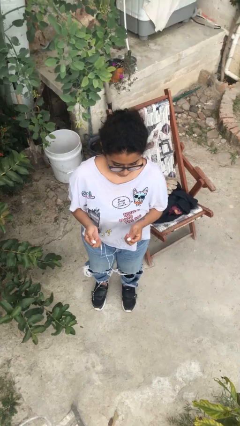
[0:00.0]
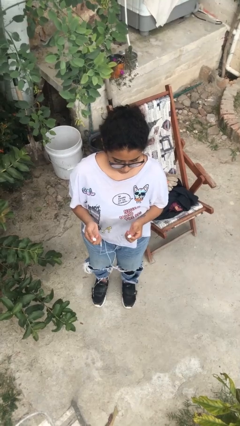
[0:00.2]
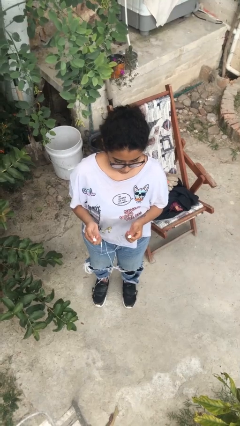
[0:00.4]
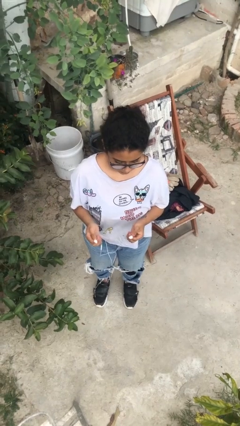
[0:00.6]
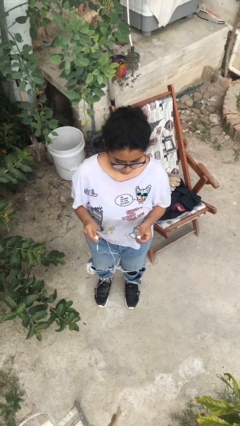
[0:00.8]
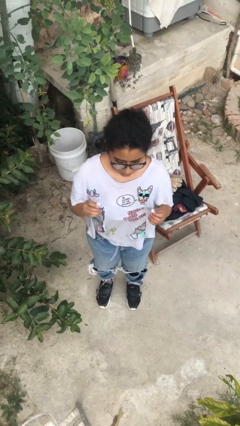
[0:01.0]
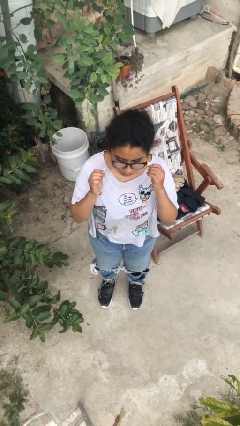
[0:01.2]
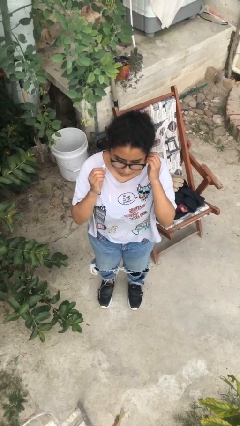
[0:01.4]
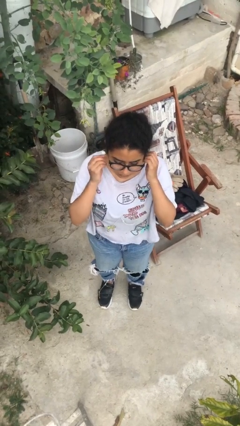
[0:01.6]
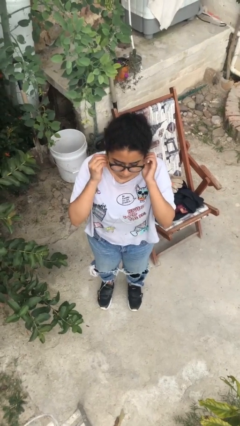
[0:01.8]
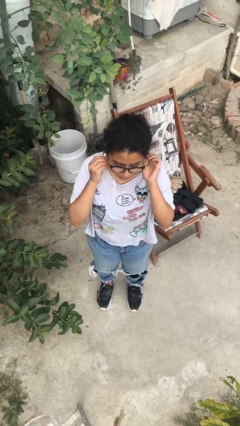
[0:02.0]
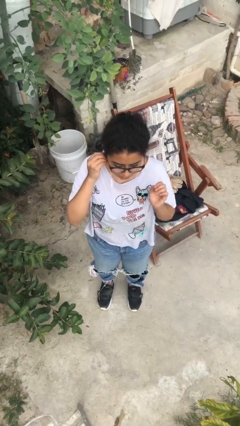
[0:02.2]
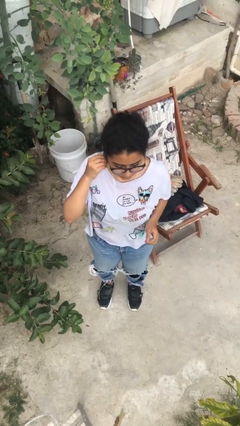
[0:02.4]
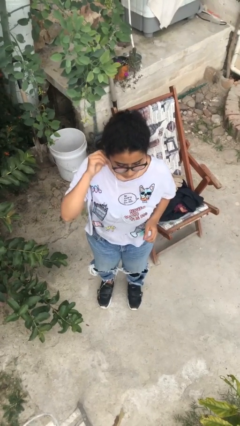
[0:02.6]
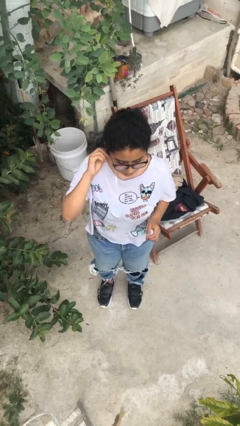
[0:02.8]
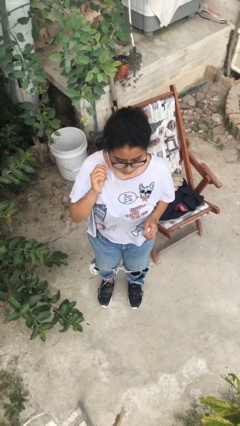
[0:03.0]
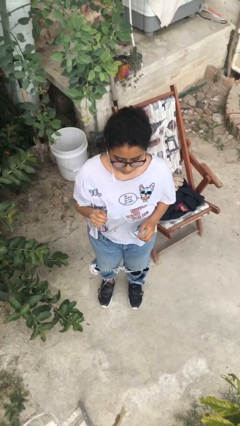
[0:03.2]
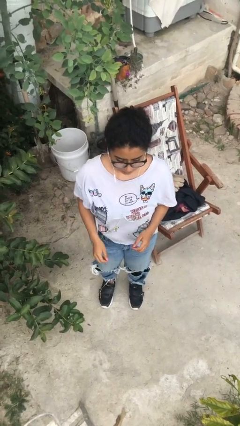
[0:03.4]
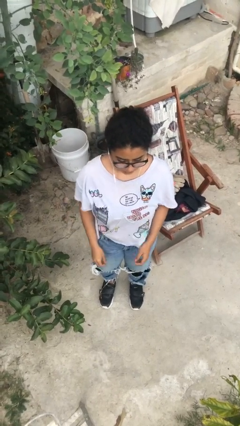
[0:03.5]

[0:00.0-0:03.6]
person puts on headphones

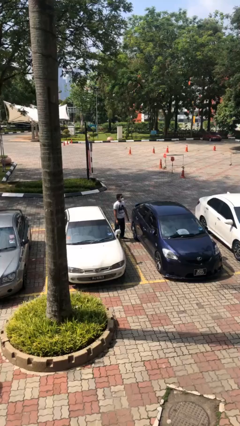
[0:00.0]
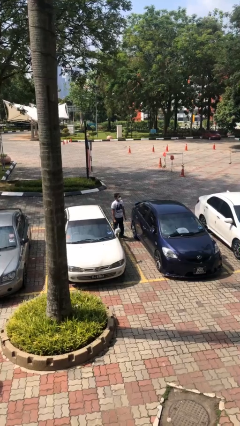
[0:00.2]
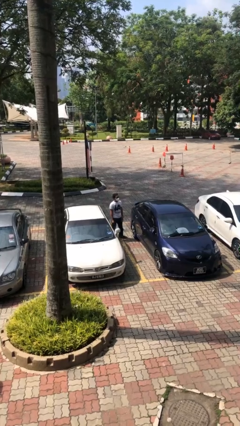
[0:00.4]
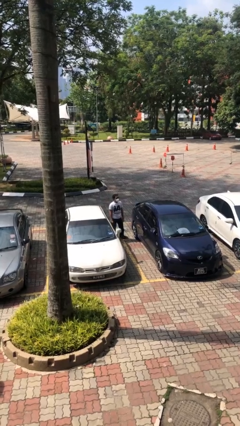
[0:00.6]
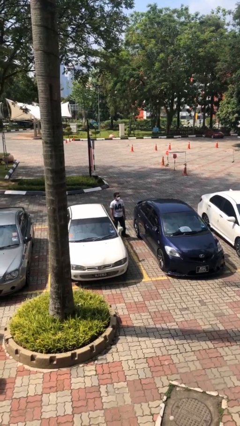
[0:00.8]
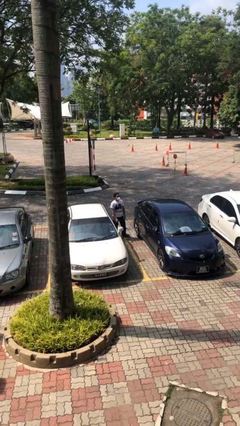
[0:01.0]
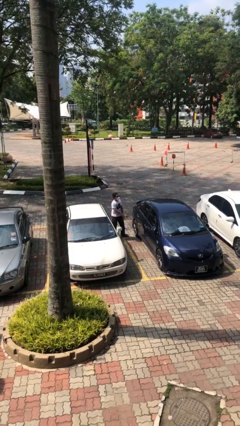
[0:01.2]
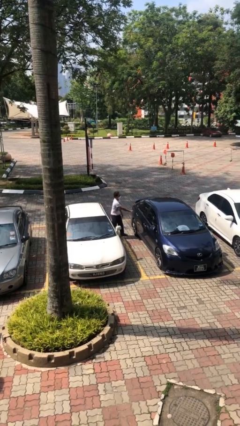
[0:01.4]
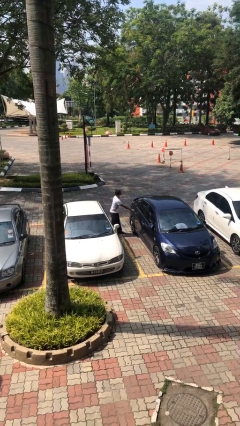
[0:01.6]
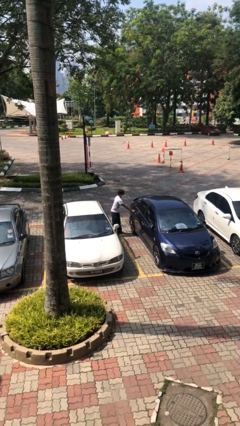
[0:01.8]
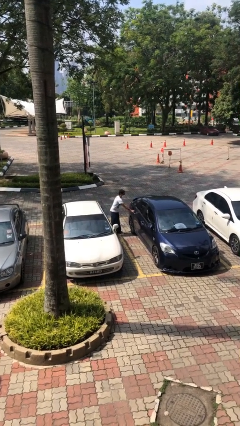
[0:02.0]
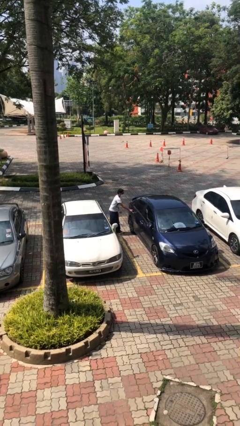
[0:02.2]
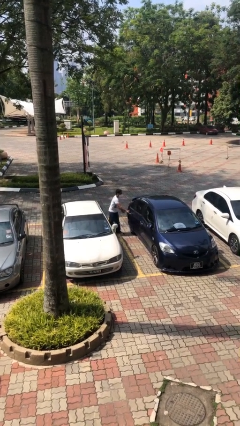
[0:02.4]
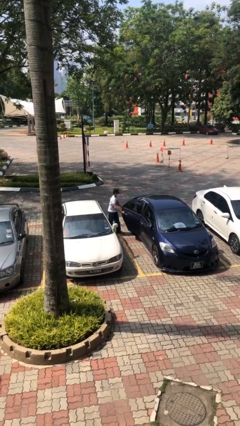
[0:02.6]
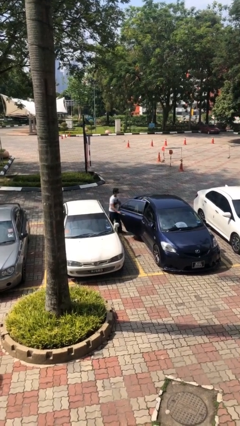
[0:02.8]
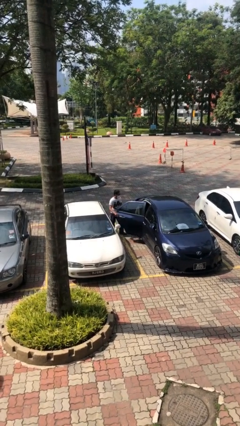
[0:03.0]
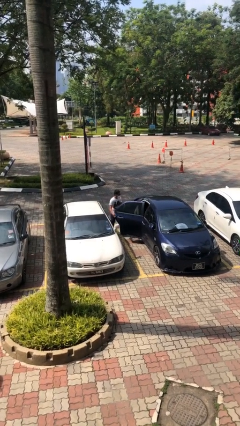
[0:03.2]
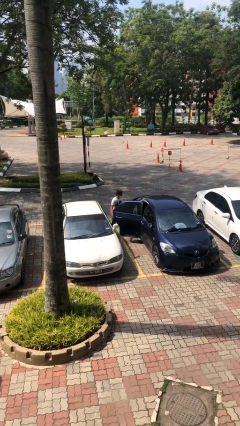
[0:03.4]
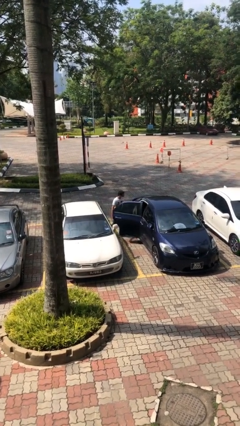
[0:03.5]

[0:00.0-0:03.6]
person opens car door

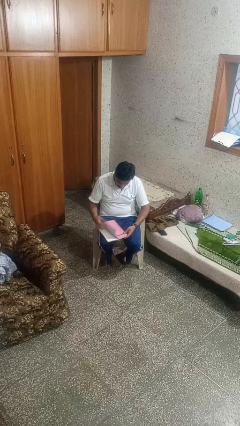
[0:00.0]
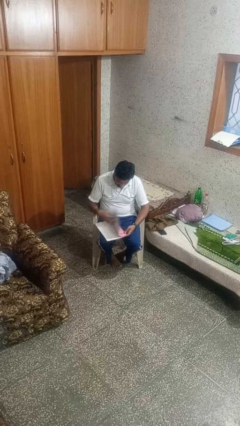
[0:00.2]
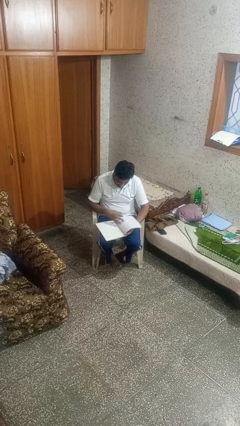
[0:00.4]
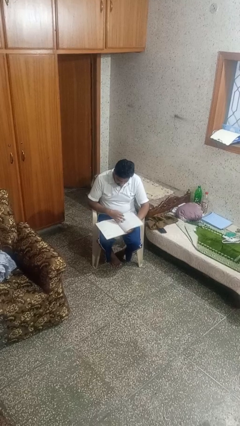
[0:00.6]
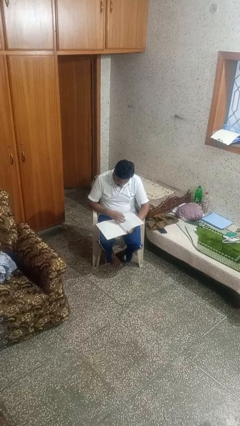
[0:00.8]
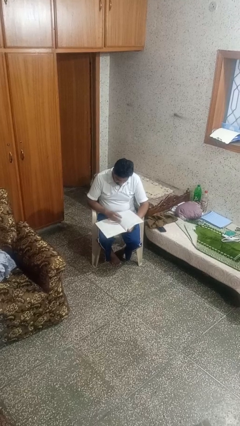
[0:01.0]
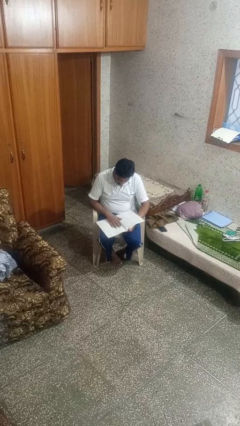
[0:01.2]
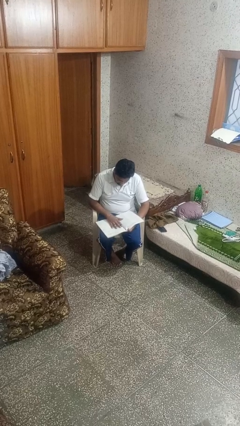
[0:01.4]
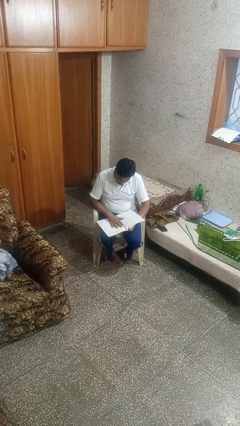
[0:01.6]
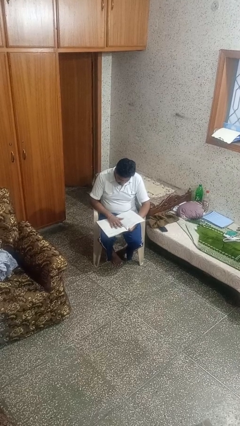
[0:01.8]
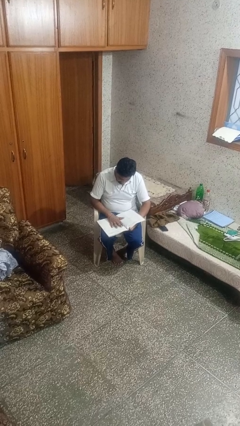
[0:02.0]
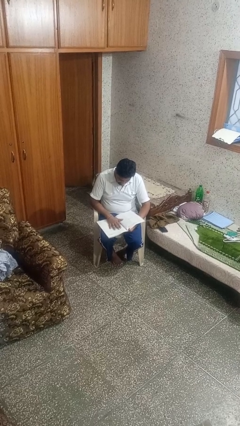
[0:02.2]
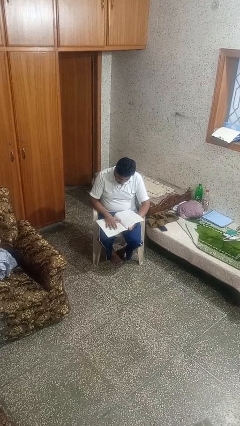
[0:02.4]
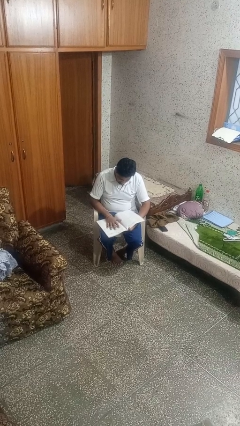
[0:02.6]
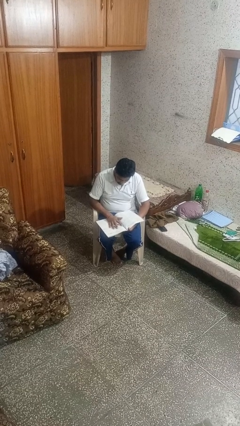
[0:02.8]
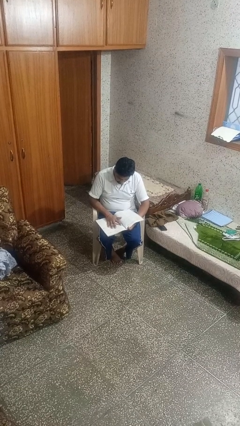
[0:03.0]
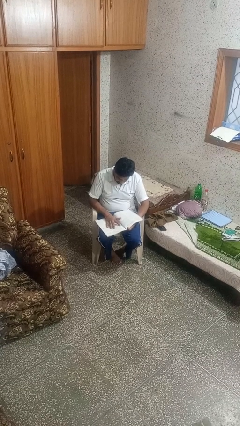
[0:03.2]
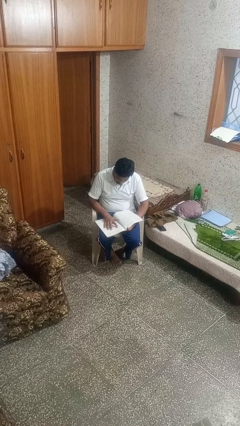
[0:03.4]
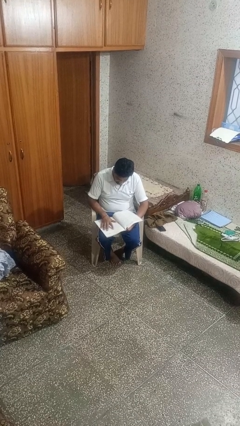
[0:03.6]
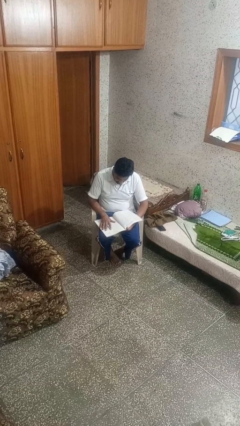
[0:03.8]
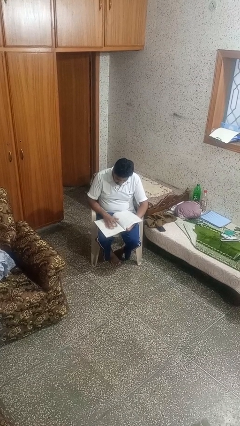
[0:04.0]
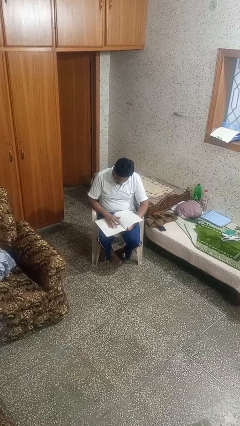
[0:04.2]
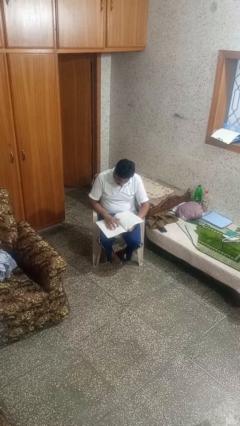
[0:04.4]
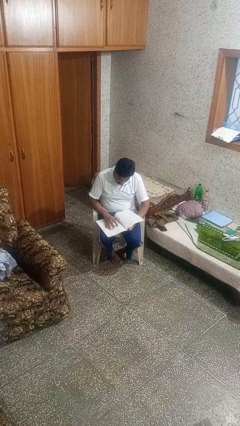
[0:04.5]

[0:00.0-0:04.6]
person reads book

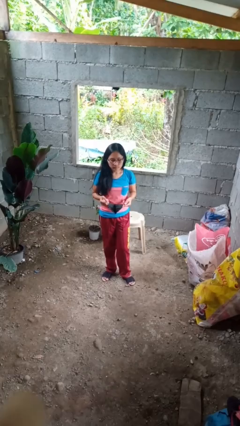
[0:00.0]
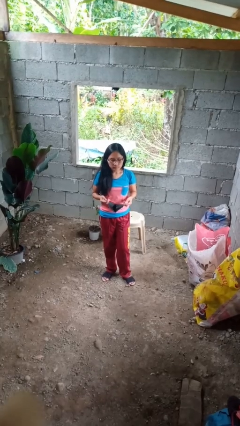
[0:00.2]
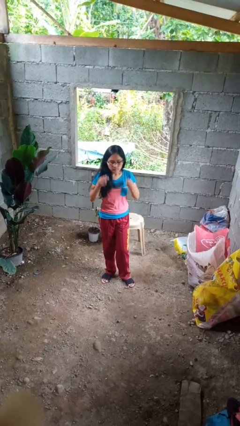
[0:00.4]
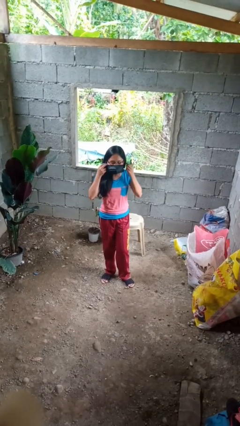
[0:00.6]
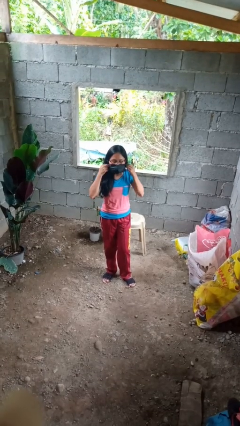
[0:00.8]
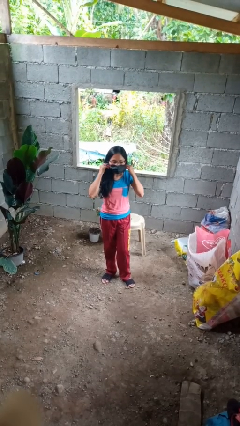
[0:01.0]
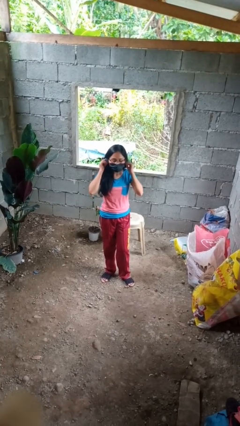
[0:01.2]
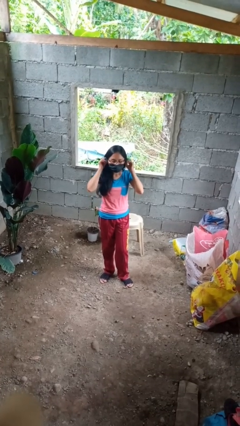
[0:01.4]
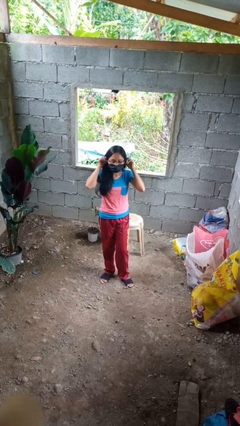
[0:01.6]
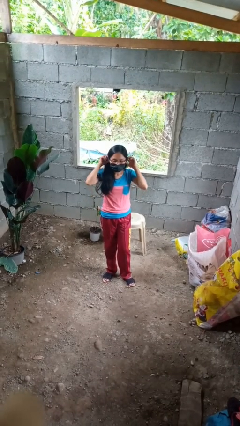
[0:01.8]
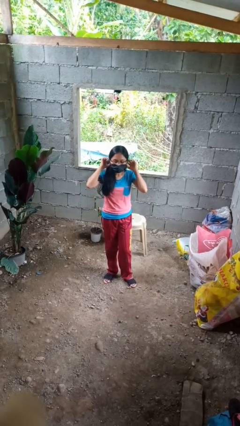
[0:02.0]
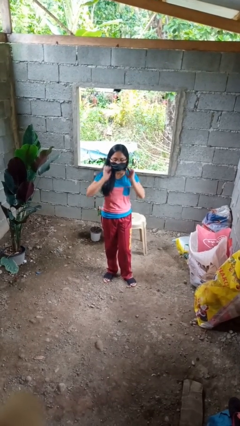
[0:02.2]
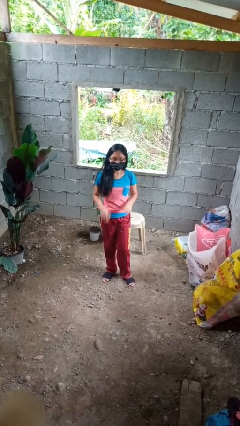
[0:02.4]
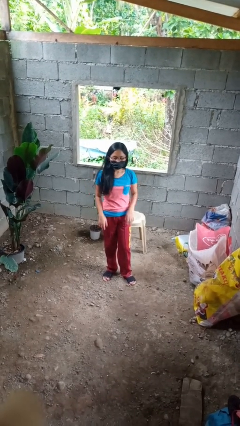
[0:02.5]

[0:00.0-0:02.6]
person puts on facemask

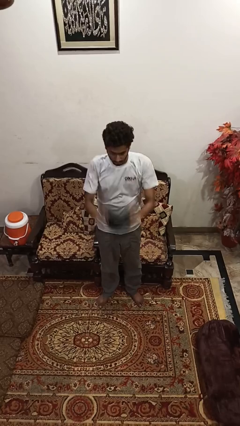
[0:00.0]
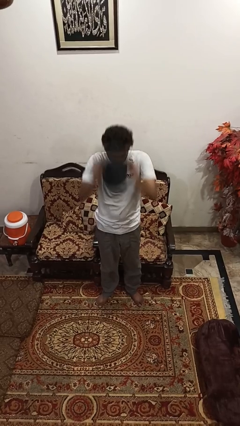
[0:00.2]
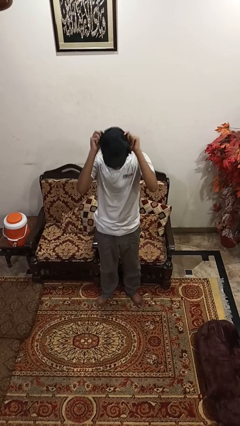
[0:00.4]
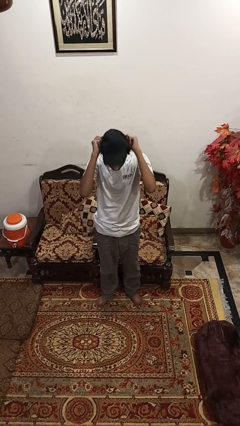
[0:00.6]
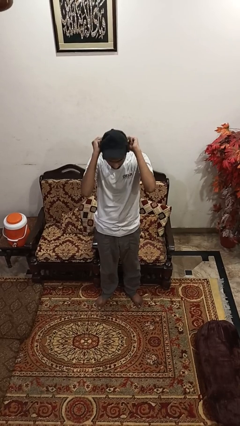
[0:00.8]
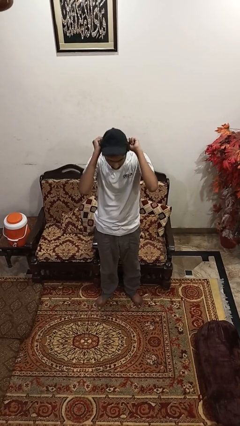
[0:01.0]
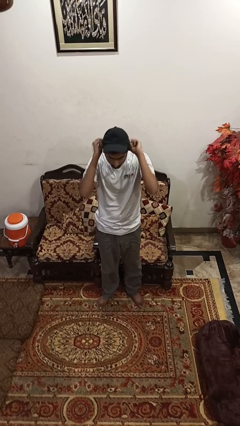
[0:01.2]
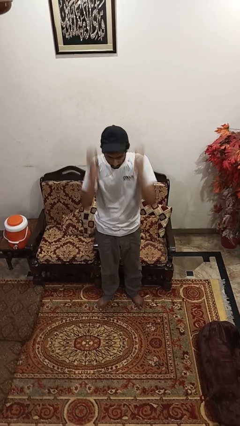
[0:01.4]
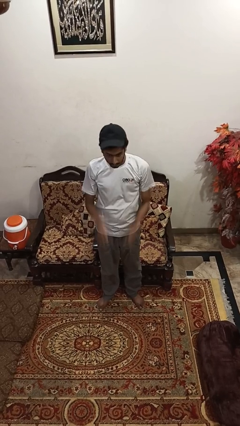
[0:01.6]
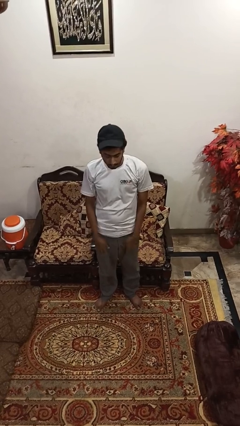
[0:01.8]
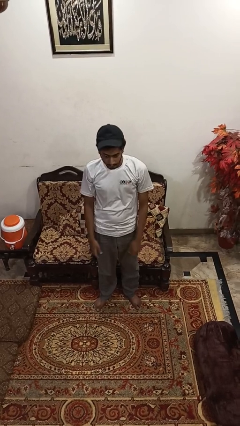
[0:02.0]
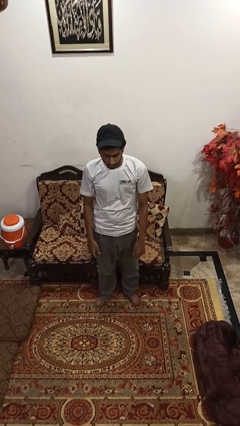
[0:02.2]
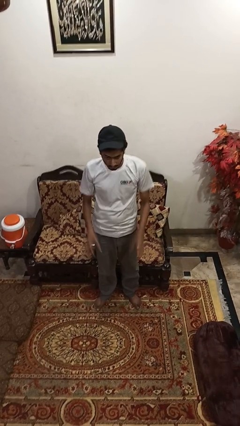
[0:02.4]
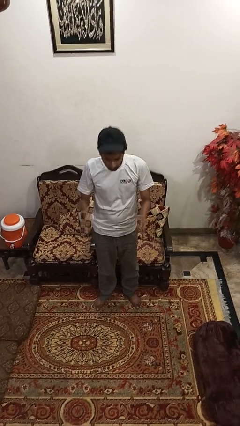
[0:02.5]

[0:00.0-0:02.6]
person puts on hat

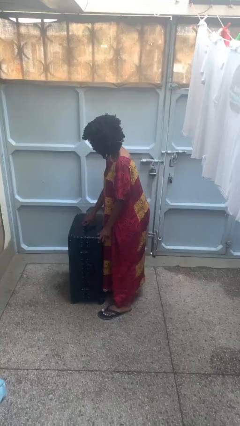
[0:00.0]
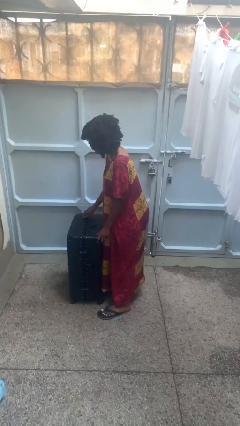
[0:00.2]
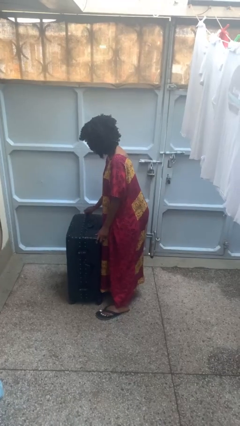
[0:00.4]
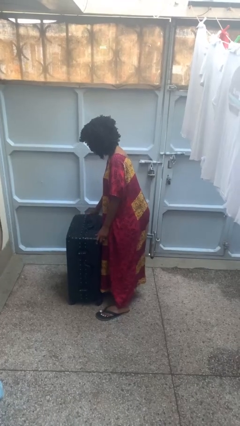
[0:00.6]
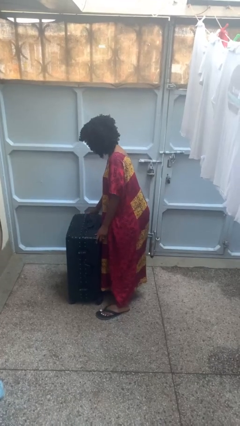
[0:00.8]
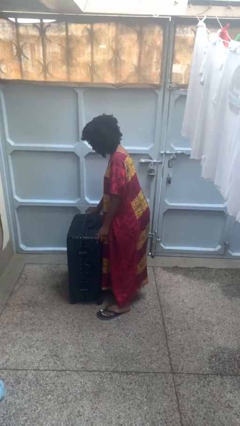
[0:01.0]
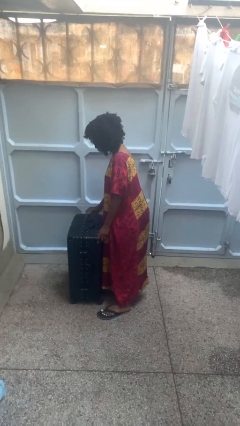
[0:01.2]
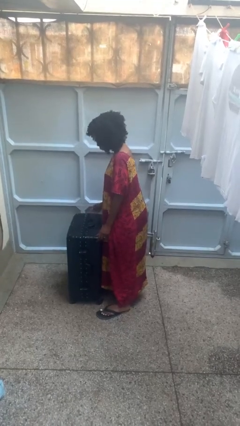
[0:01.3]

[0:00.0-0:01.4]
person closes suitcase
